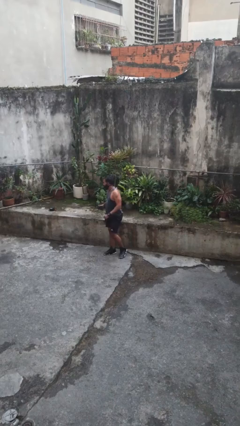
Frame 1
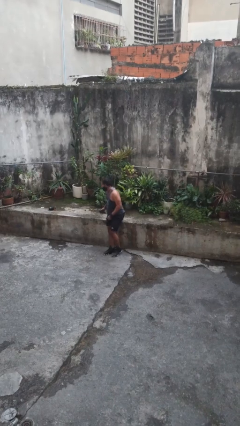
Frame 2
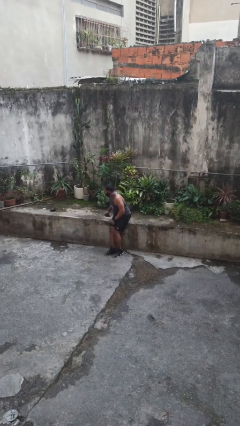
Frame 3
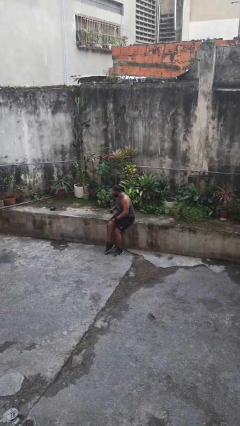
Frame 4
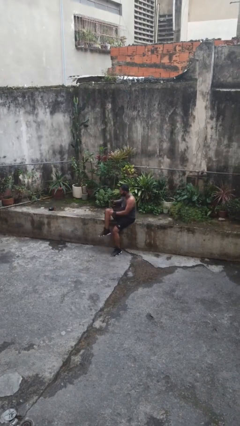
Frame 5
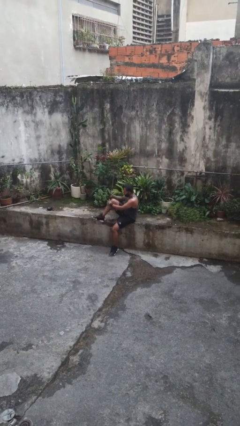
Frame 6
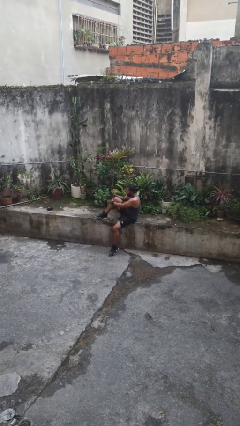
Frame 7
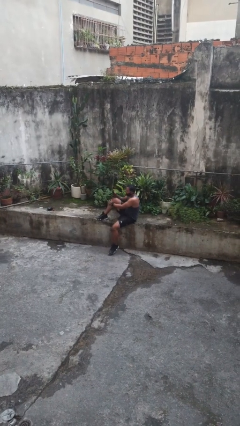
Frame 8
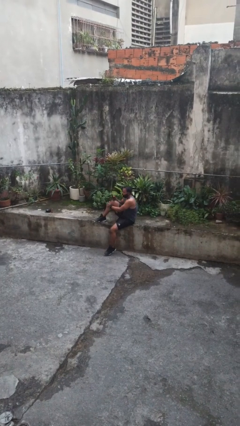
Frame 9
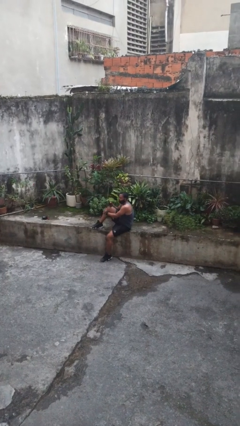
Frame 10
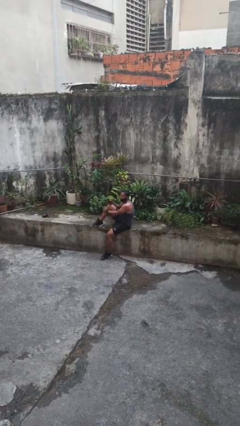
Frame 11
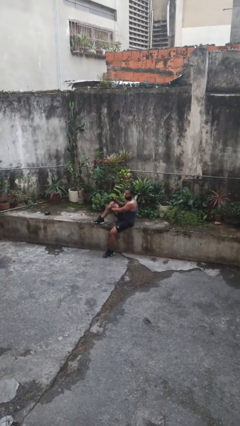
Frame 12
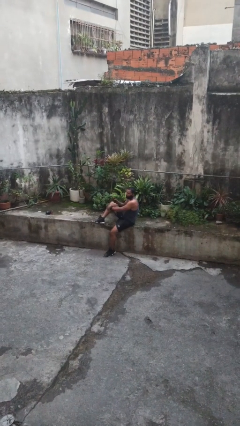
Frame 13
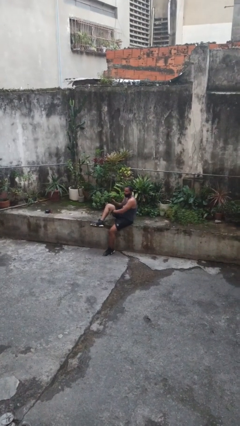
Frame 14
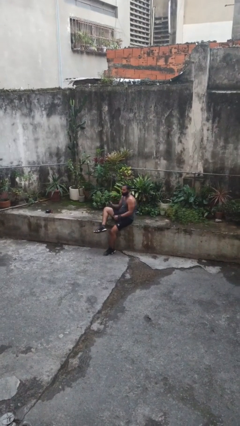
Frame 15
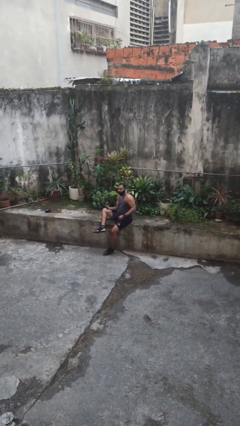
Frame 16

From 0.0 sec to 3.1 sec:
person sits down

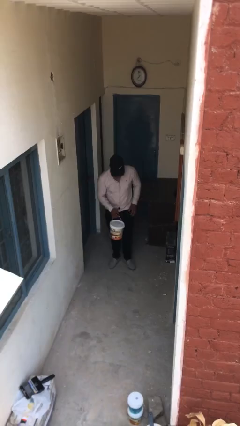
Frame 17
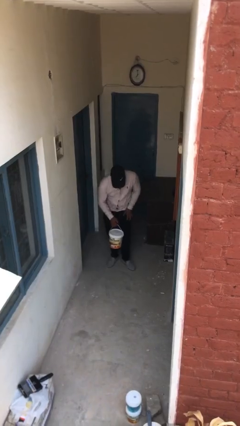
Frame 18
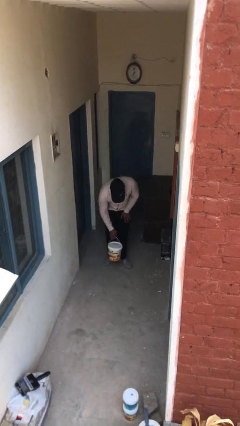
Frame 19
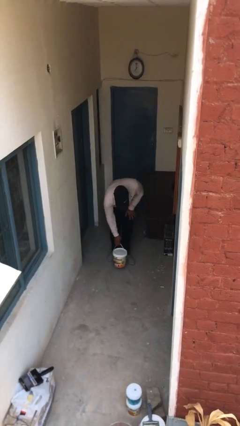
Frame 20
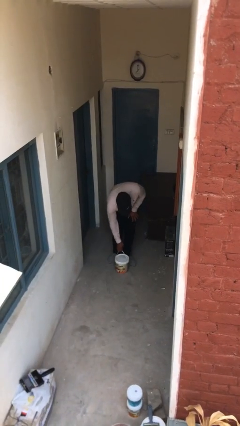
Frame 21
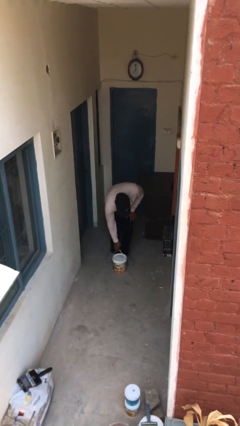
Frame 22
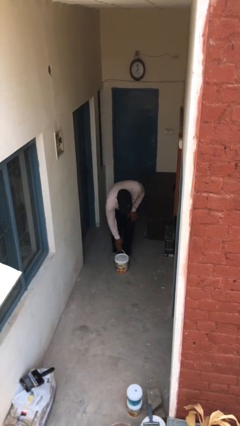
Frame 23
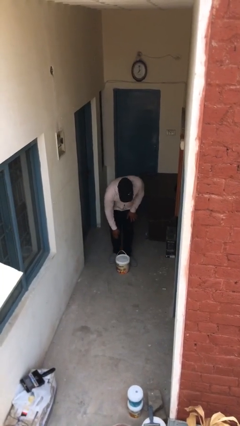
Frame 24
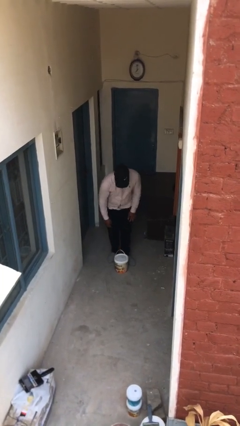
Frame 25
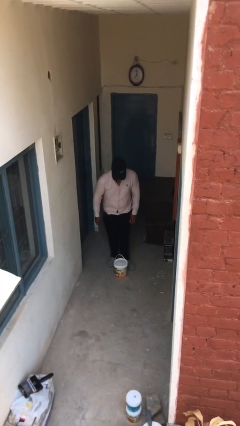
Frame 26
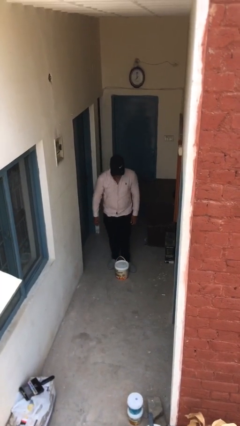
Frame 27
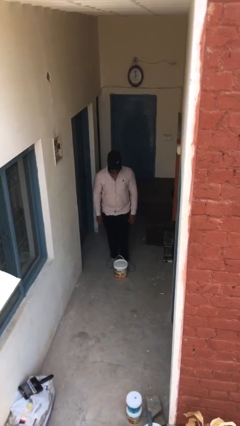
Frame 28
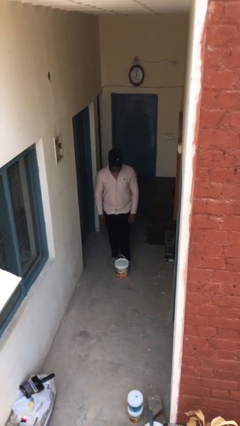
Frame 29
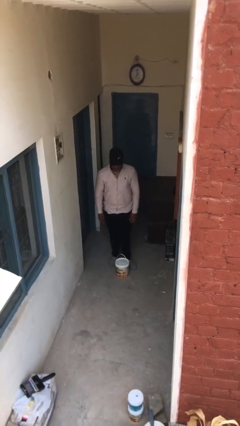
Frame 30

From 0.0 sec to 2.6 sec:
person puts down object on floor

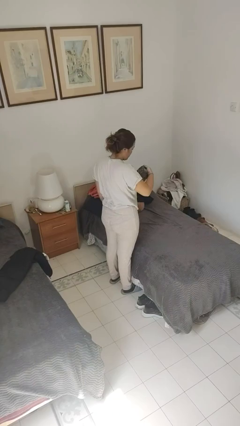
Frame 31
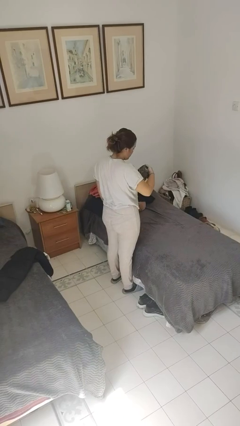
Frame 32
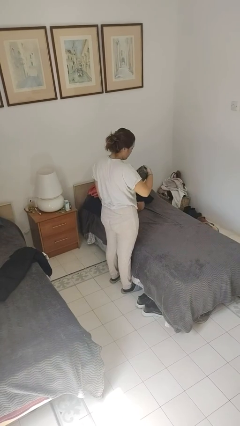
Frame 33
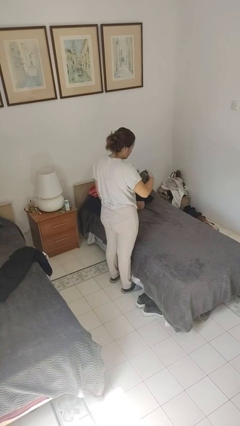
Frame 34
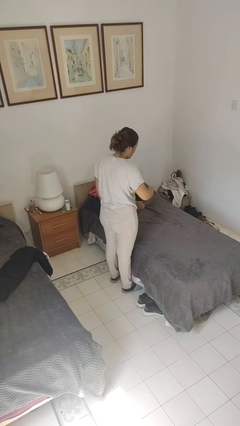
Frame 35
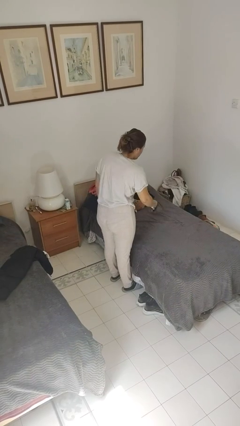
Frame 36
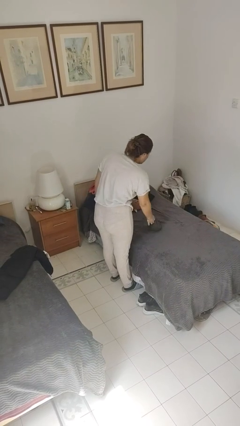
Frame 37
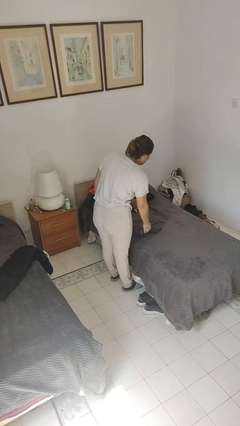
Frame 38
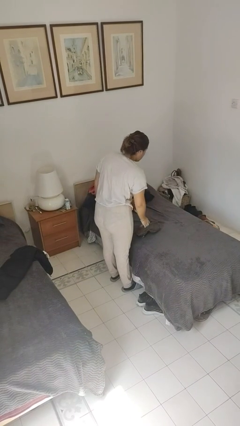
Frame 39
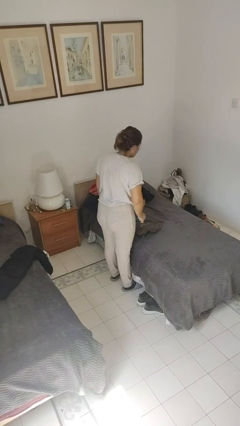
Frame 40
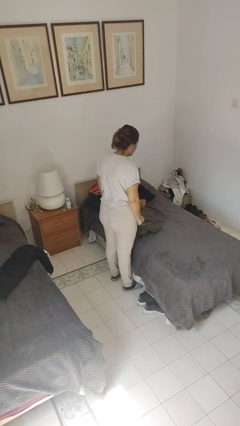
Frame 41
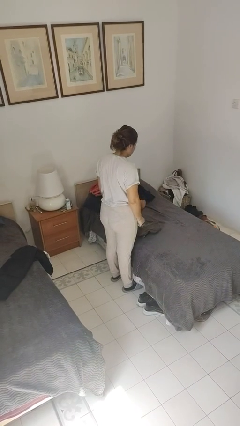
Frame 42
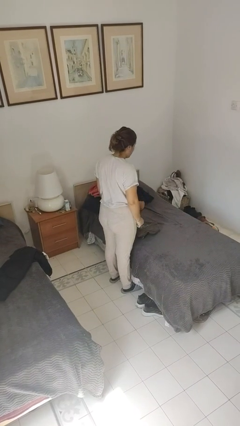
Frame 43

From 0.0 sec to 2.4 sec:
person puts down object on bed

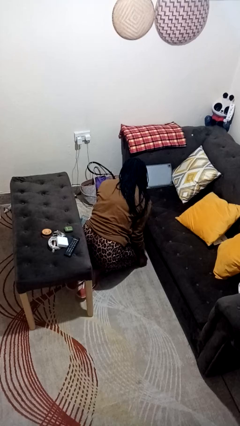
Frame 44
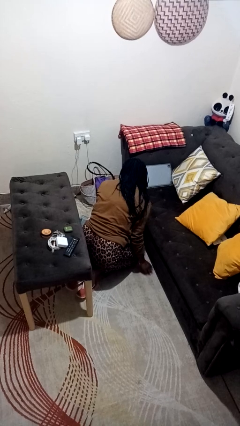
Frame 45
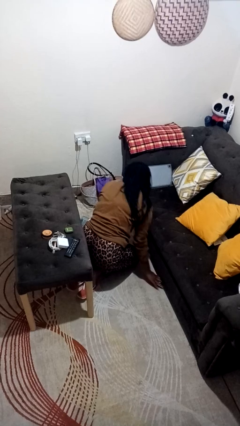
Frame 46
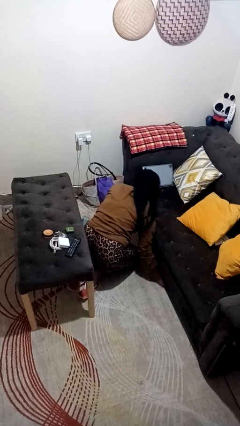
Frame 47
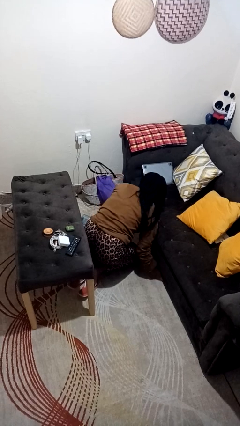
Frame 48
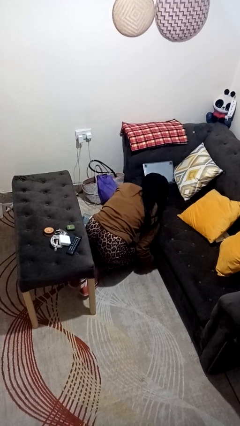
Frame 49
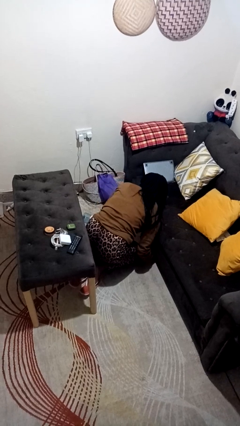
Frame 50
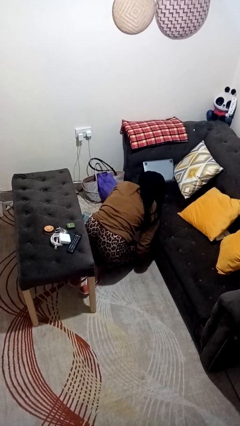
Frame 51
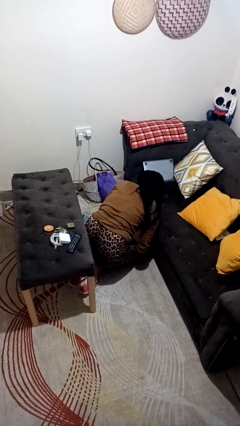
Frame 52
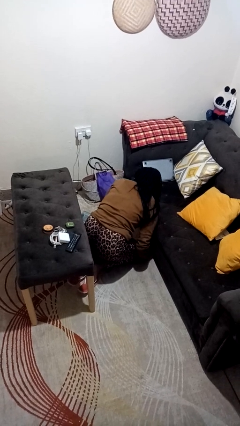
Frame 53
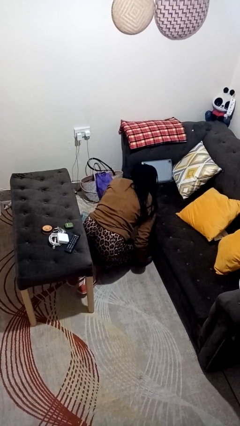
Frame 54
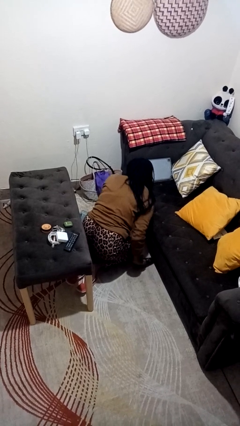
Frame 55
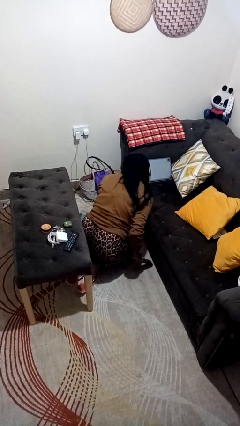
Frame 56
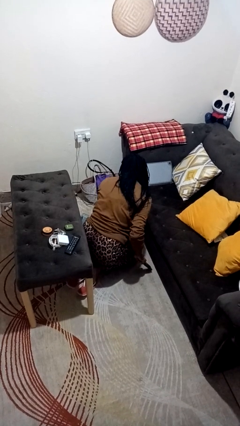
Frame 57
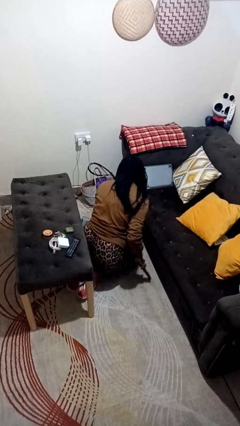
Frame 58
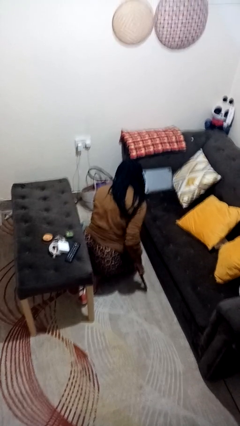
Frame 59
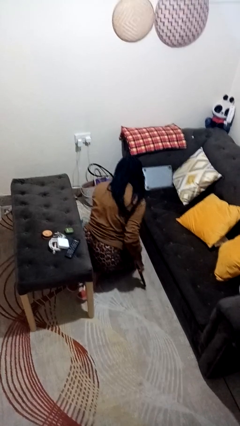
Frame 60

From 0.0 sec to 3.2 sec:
person searches under couch

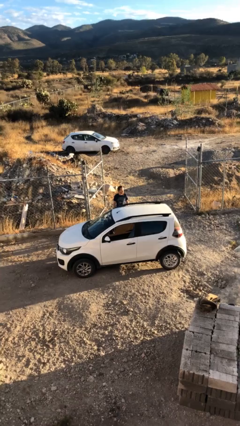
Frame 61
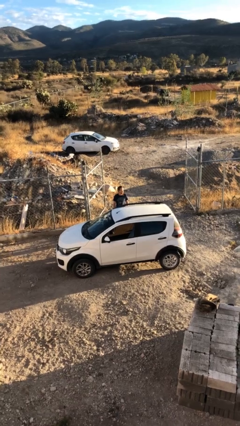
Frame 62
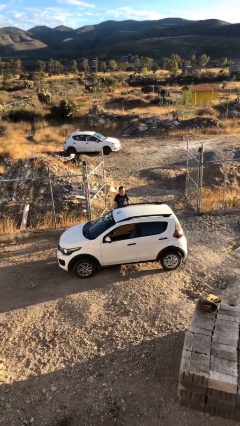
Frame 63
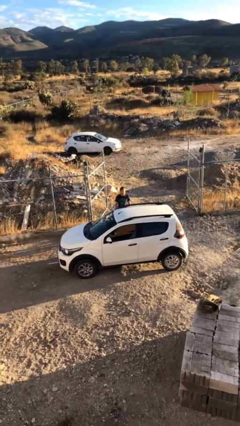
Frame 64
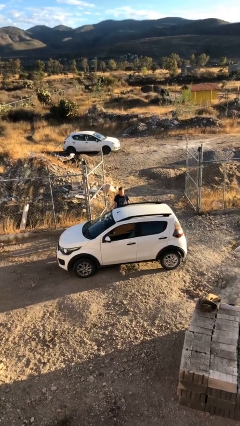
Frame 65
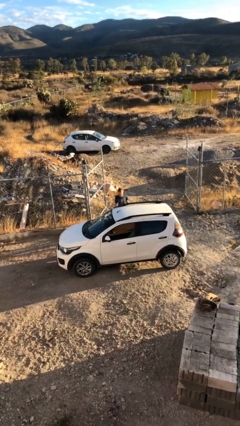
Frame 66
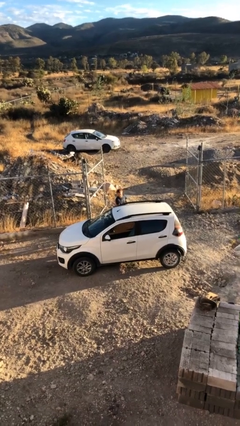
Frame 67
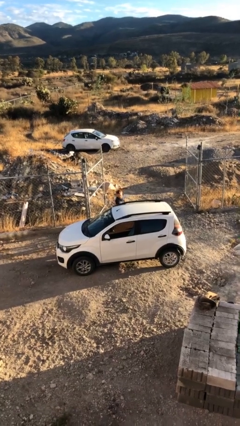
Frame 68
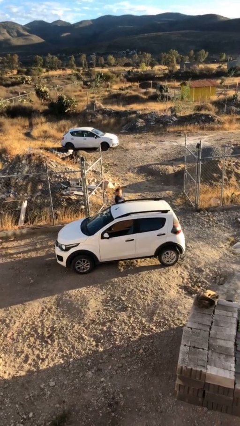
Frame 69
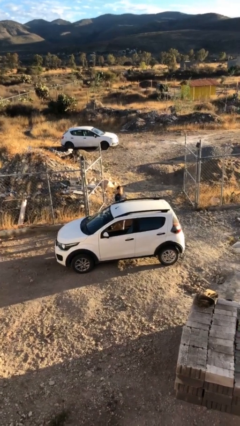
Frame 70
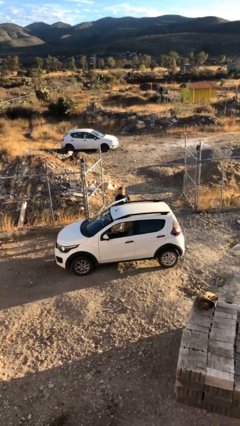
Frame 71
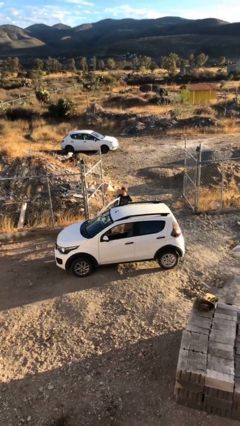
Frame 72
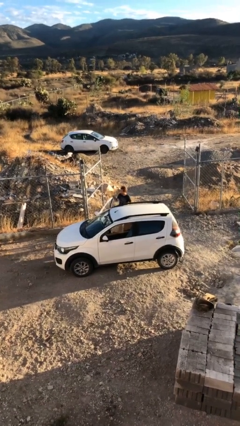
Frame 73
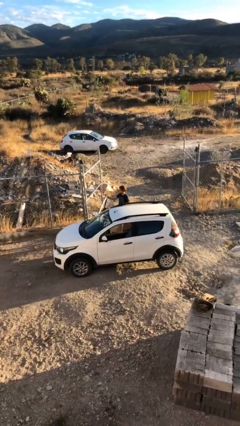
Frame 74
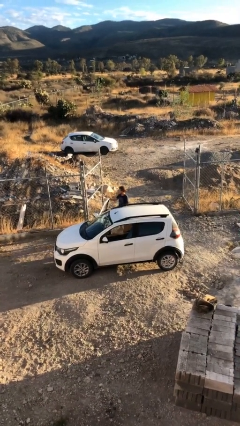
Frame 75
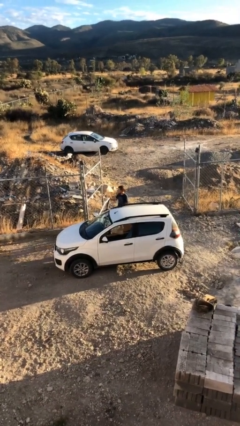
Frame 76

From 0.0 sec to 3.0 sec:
person opens car door

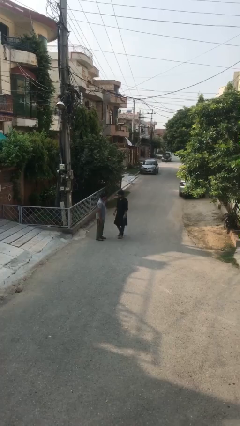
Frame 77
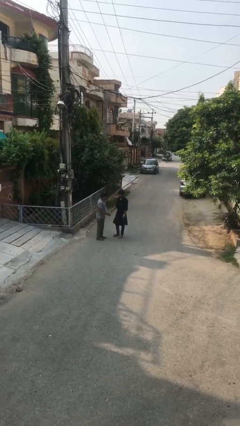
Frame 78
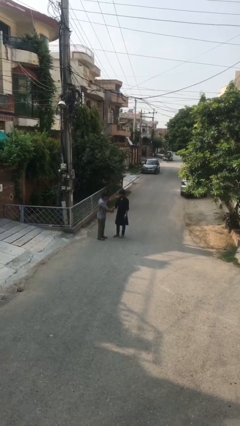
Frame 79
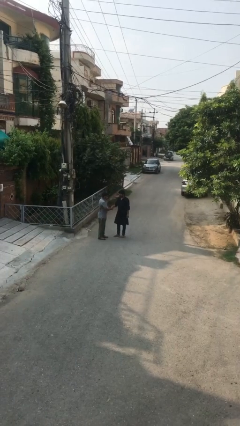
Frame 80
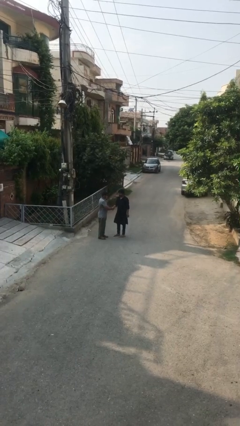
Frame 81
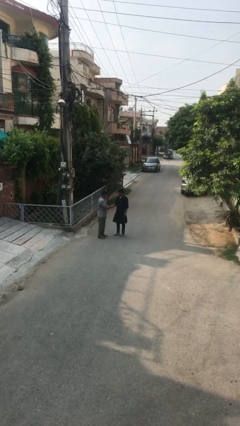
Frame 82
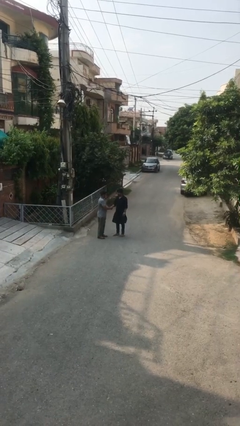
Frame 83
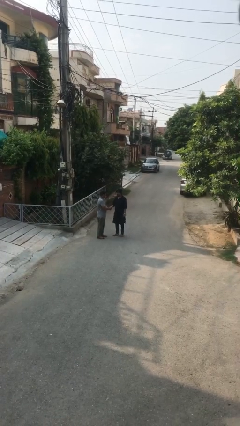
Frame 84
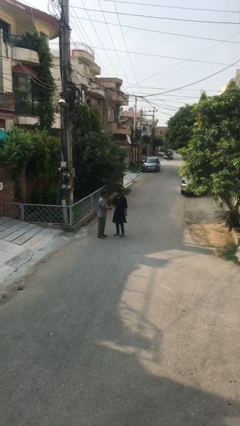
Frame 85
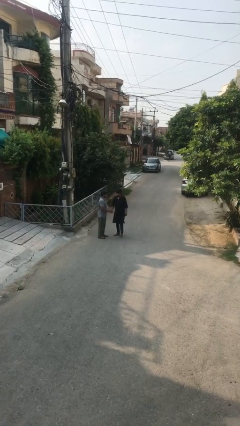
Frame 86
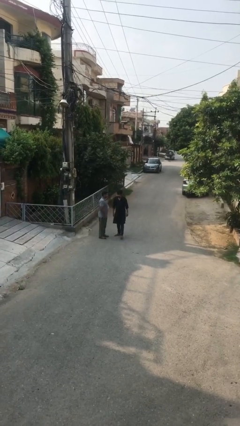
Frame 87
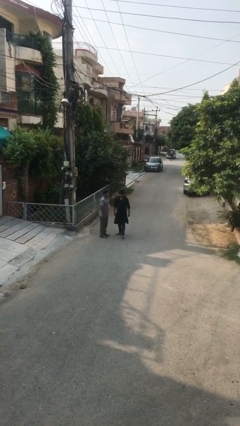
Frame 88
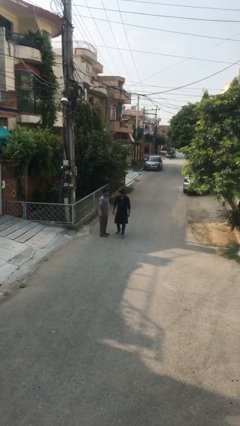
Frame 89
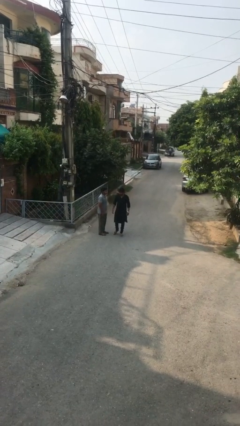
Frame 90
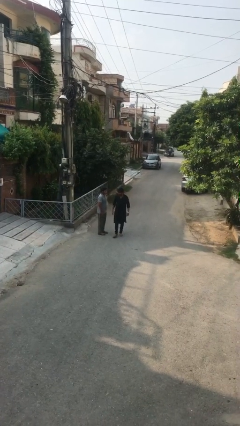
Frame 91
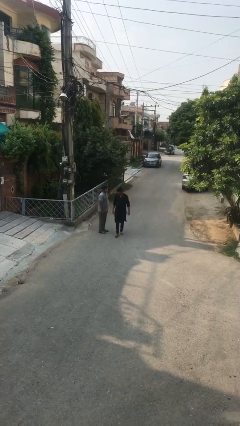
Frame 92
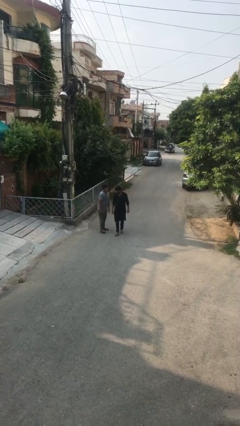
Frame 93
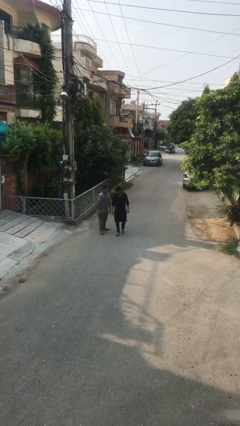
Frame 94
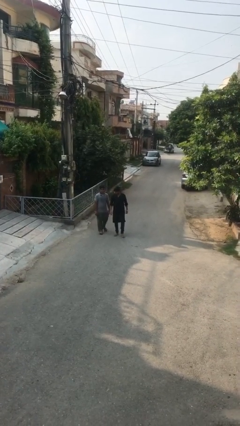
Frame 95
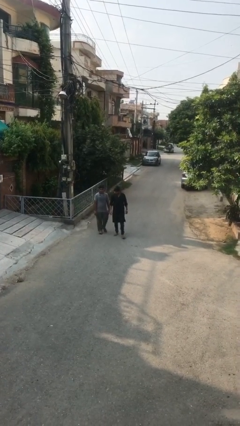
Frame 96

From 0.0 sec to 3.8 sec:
person shakes hand
